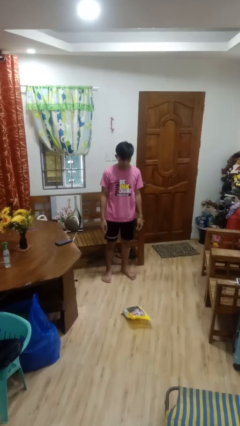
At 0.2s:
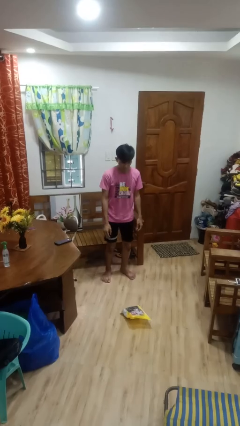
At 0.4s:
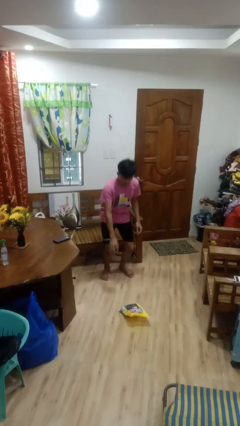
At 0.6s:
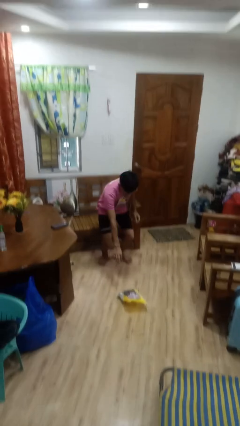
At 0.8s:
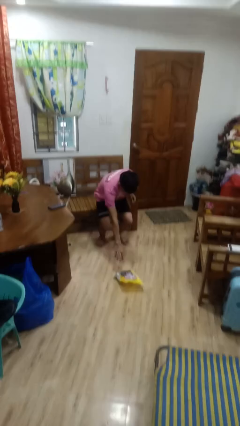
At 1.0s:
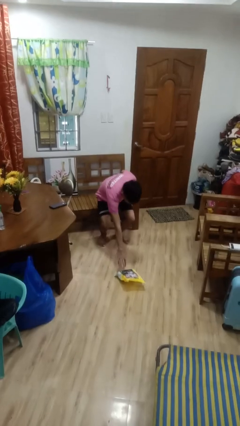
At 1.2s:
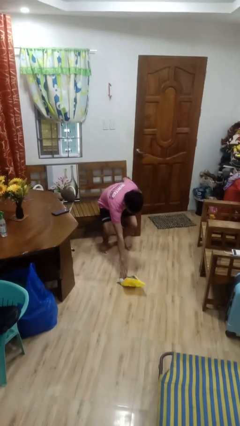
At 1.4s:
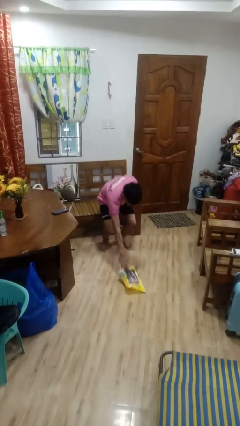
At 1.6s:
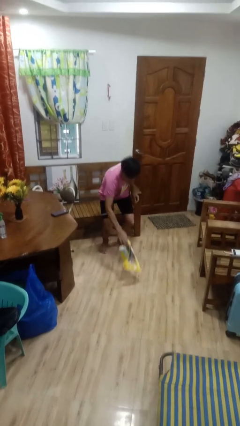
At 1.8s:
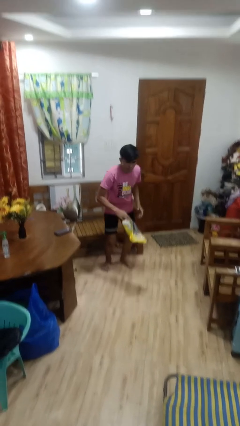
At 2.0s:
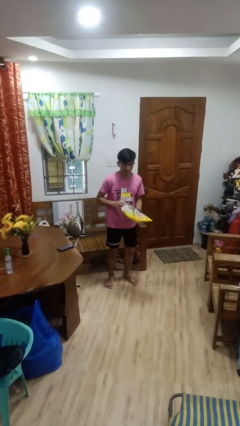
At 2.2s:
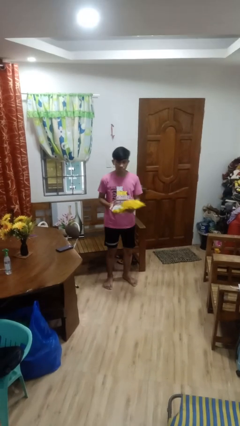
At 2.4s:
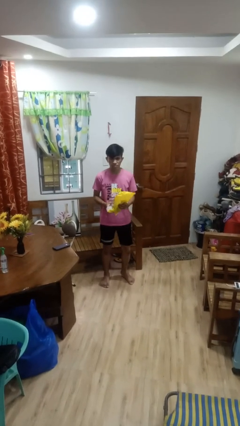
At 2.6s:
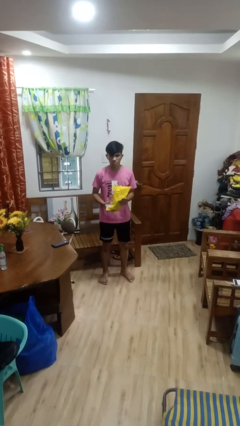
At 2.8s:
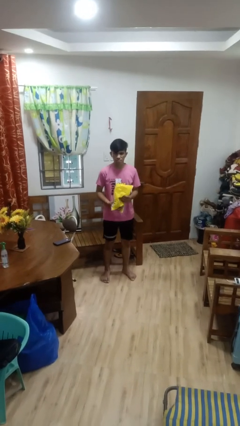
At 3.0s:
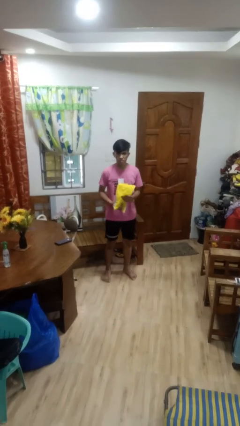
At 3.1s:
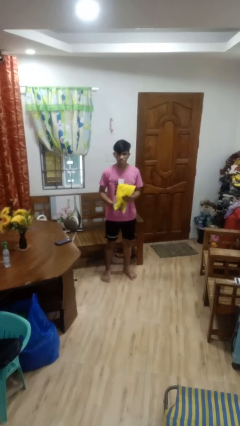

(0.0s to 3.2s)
person picks up object from floor

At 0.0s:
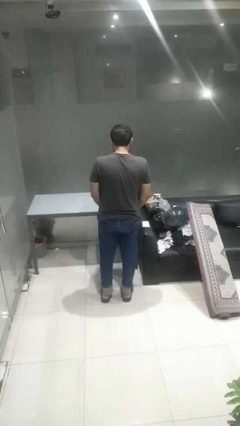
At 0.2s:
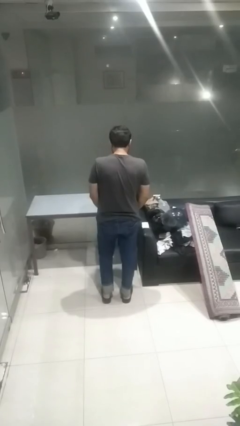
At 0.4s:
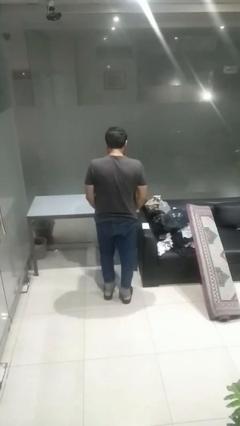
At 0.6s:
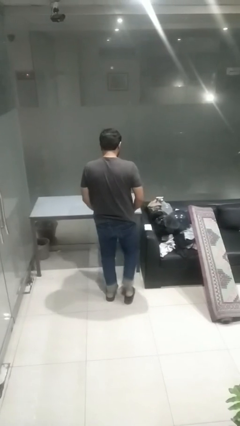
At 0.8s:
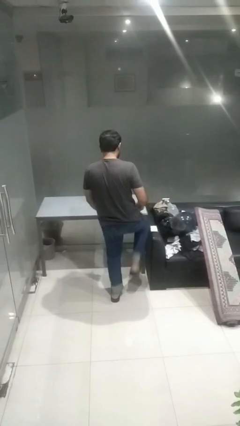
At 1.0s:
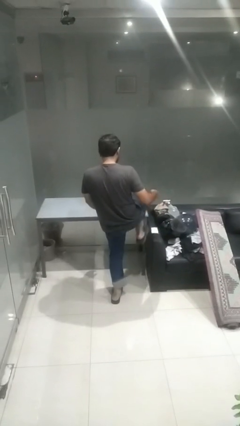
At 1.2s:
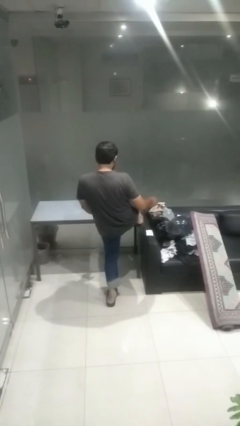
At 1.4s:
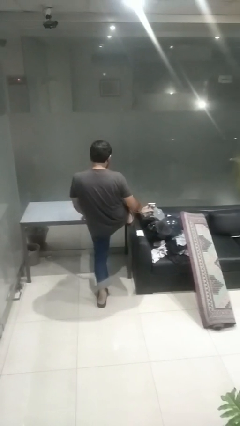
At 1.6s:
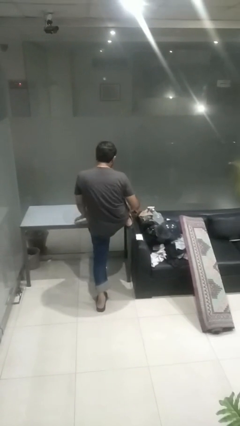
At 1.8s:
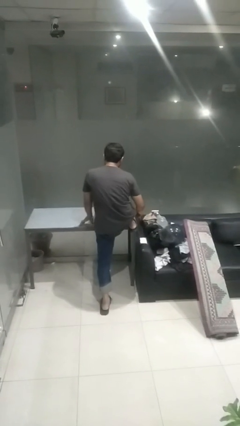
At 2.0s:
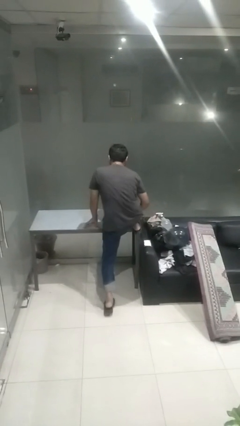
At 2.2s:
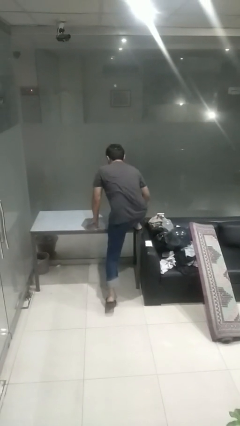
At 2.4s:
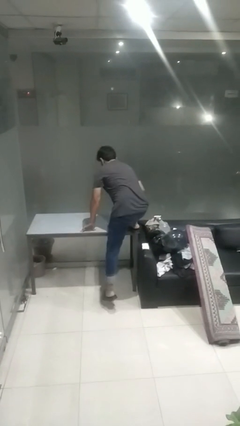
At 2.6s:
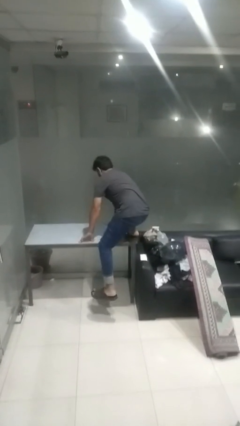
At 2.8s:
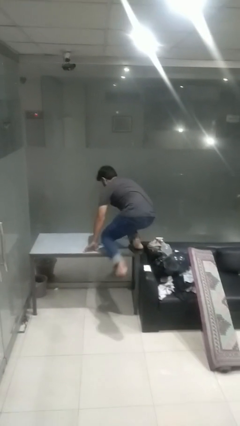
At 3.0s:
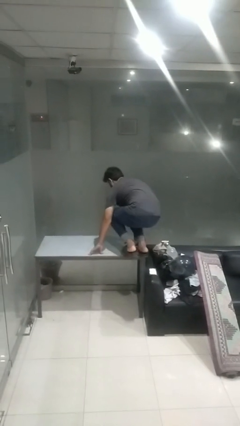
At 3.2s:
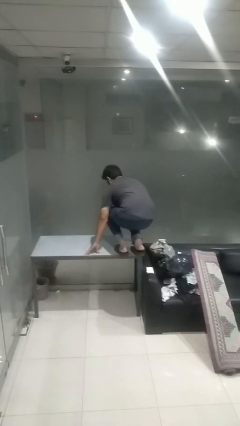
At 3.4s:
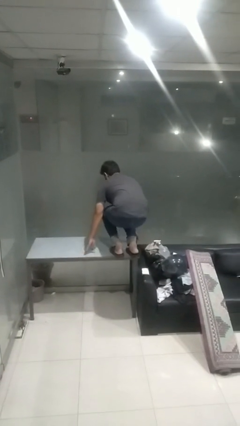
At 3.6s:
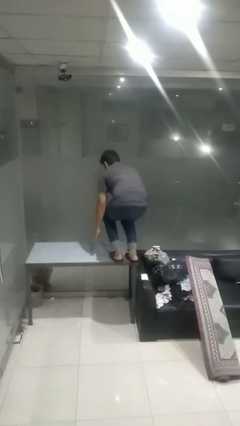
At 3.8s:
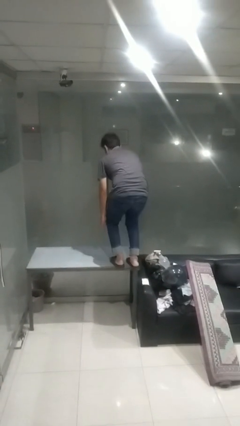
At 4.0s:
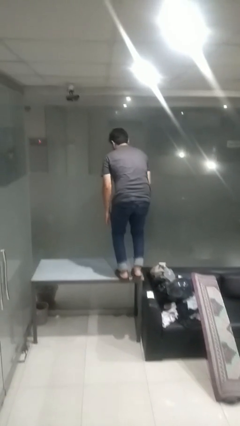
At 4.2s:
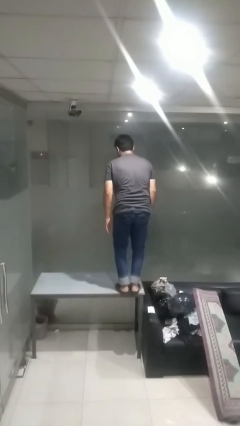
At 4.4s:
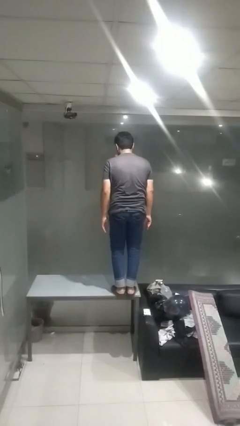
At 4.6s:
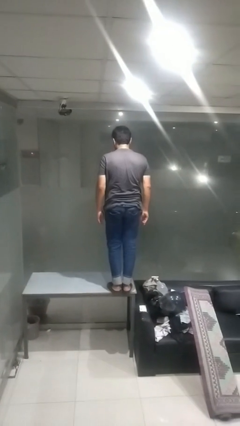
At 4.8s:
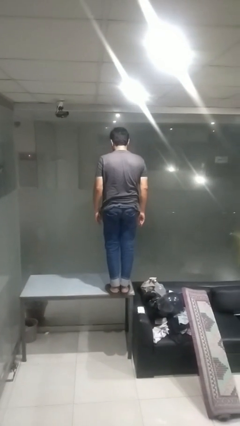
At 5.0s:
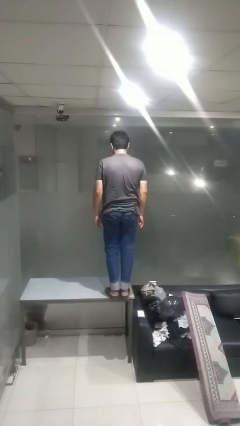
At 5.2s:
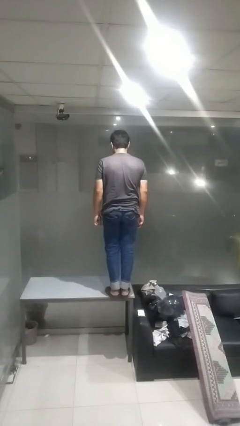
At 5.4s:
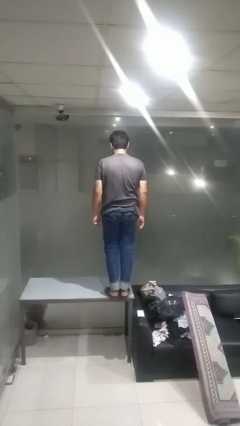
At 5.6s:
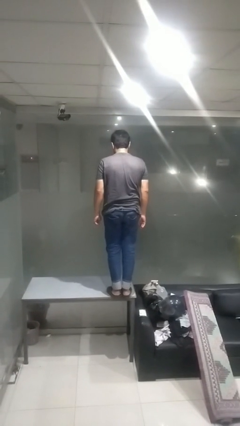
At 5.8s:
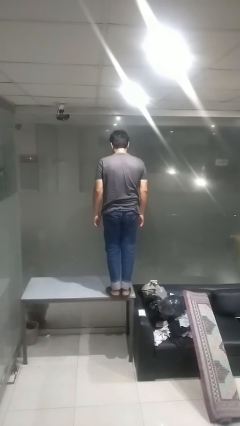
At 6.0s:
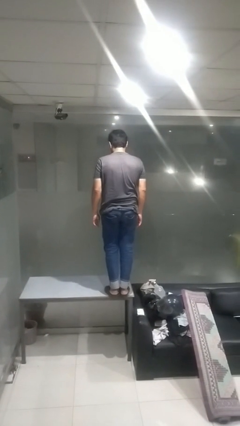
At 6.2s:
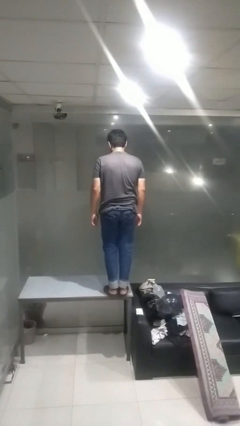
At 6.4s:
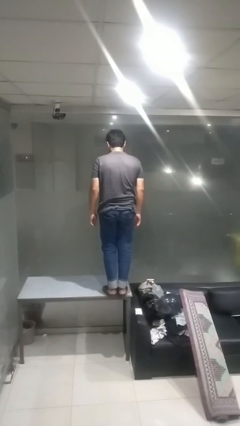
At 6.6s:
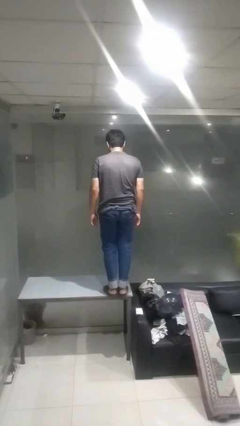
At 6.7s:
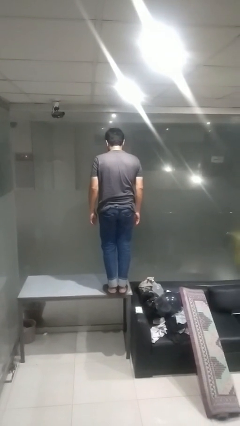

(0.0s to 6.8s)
person climbs on table

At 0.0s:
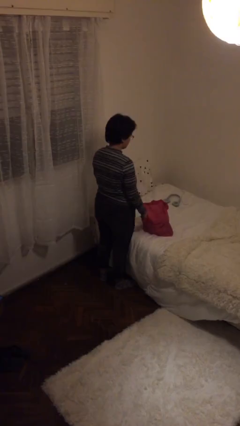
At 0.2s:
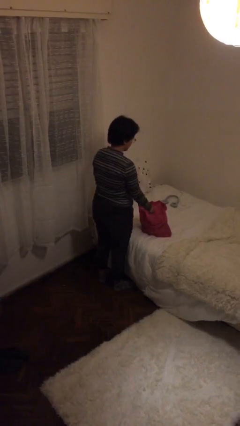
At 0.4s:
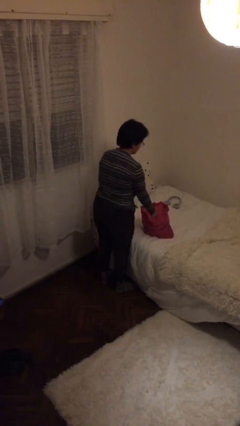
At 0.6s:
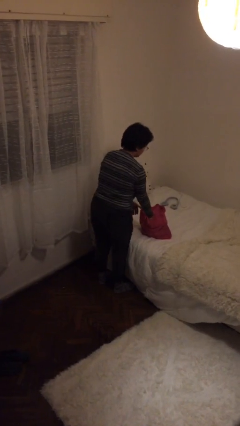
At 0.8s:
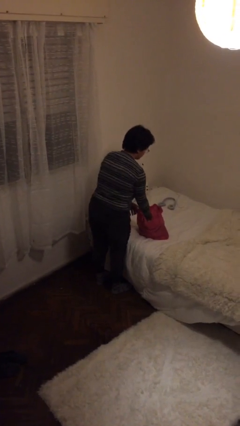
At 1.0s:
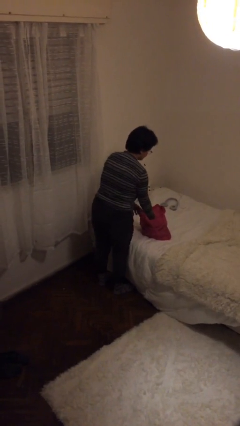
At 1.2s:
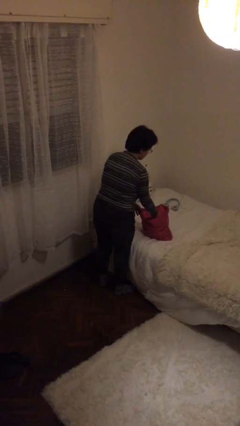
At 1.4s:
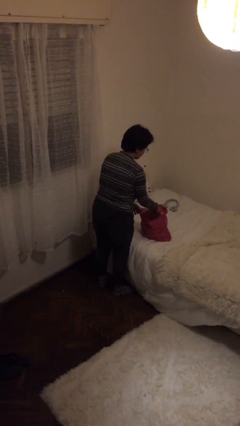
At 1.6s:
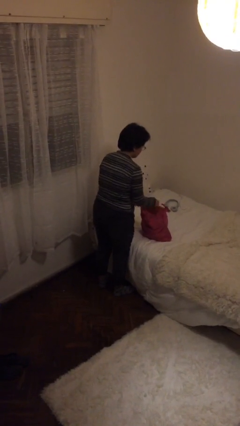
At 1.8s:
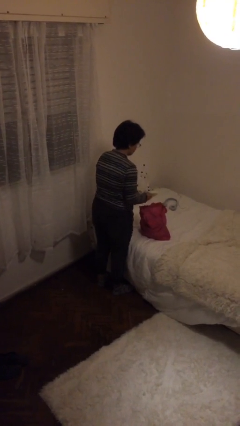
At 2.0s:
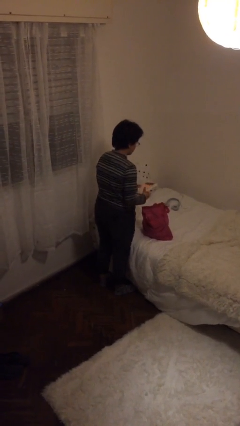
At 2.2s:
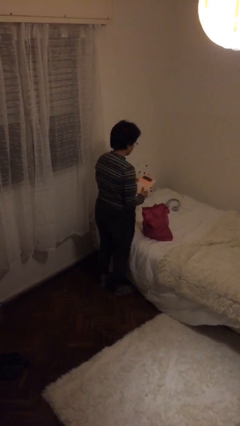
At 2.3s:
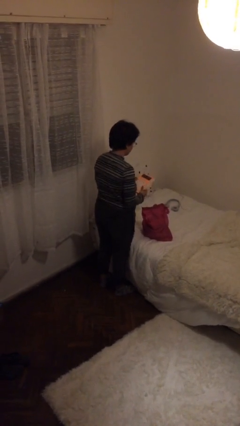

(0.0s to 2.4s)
person takes object from bag

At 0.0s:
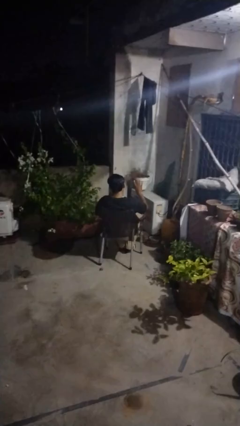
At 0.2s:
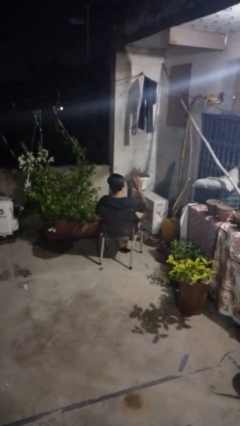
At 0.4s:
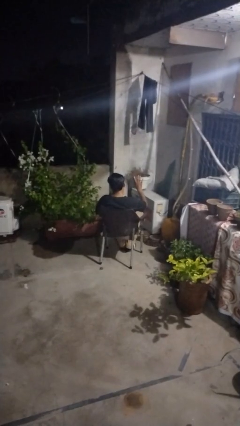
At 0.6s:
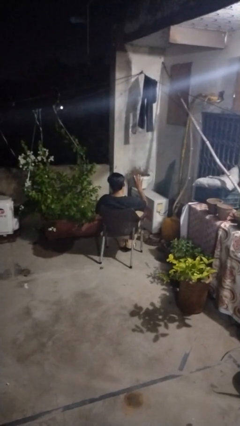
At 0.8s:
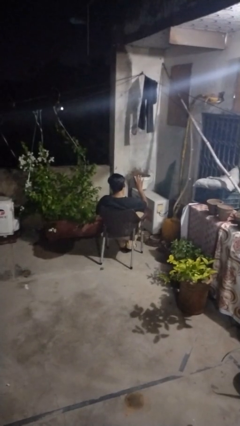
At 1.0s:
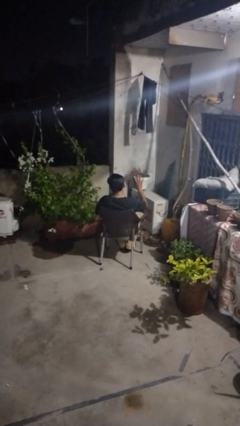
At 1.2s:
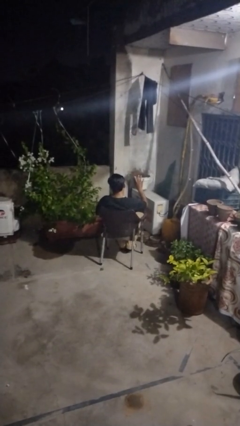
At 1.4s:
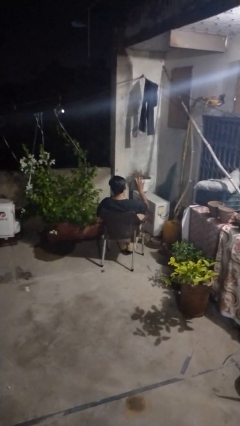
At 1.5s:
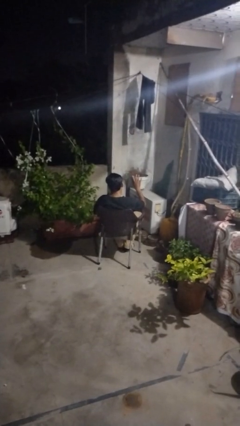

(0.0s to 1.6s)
person gestures number four

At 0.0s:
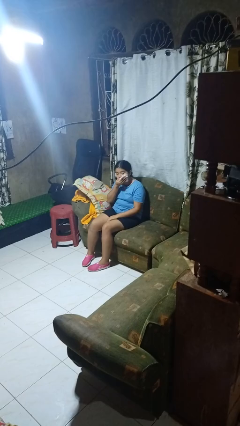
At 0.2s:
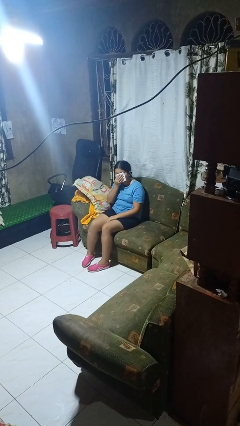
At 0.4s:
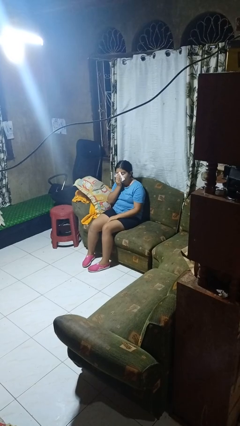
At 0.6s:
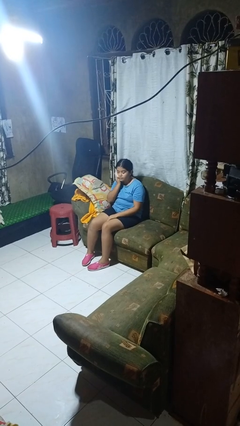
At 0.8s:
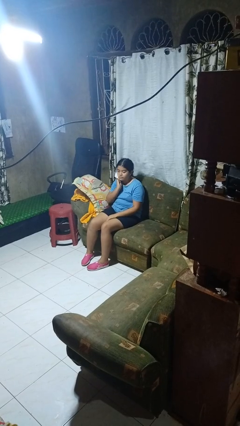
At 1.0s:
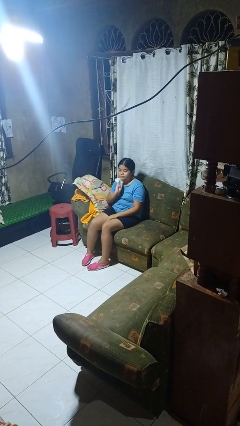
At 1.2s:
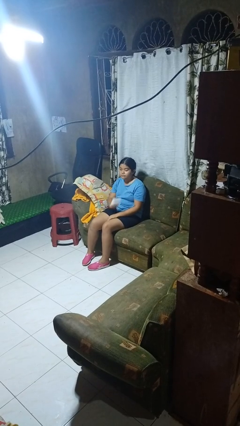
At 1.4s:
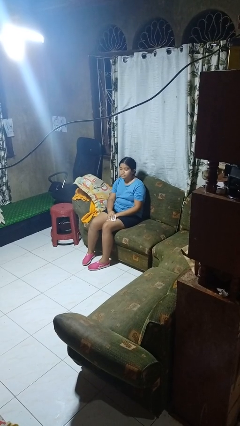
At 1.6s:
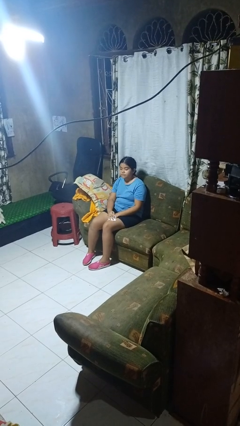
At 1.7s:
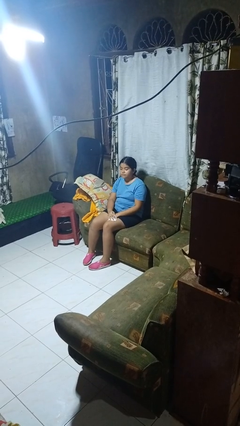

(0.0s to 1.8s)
person wipes mouth with napkin

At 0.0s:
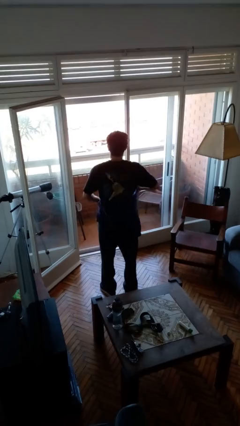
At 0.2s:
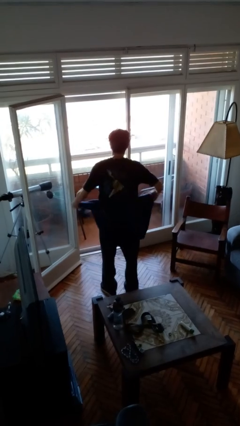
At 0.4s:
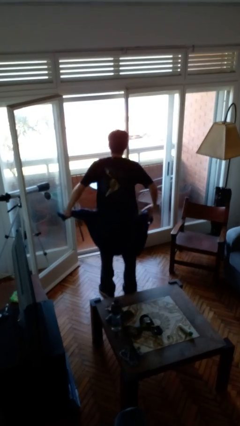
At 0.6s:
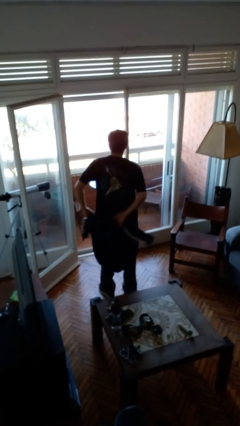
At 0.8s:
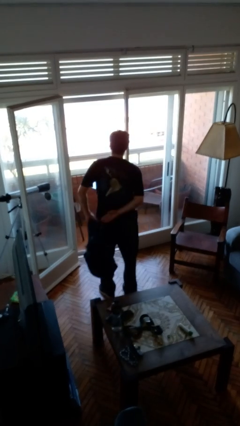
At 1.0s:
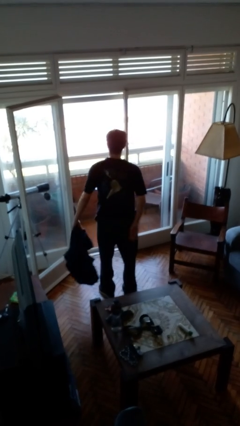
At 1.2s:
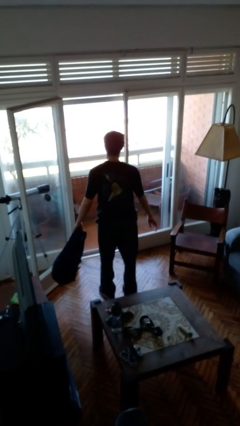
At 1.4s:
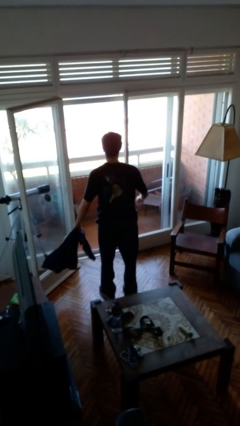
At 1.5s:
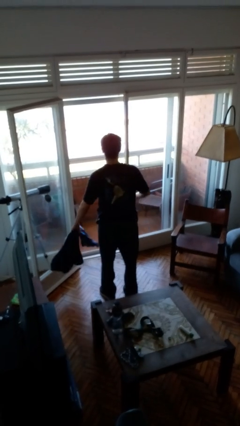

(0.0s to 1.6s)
person unties jacket around waist

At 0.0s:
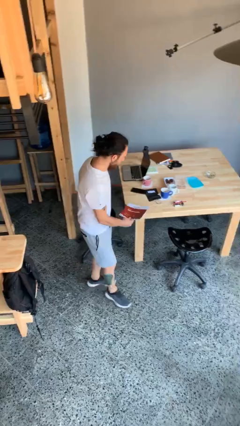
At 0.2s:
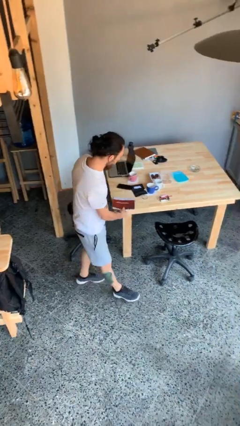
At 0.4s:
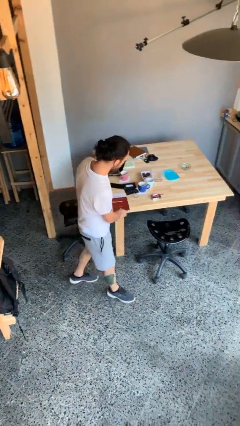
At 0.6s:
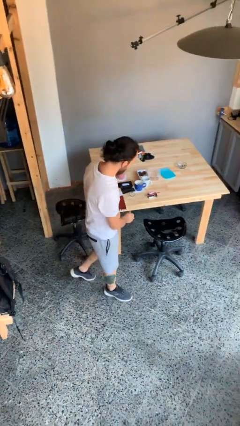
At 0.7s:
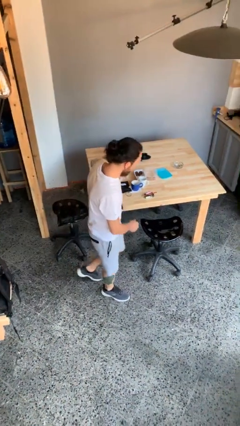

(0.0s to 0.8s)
person puts down object on table
